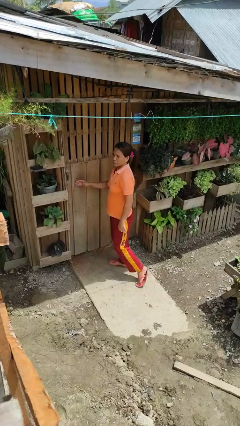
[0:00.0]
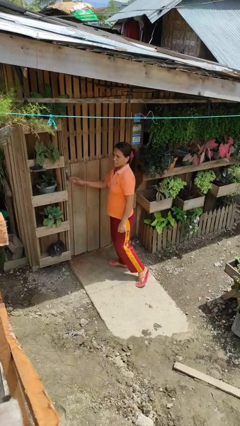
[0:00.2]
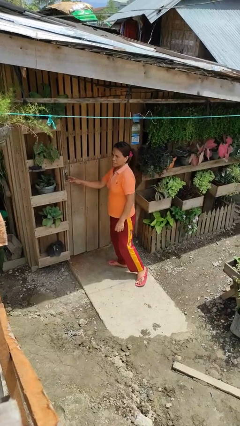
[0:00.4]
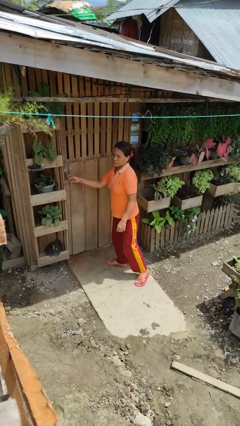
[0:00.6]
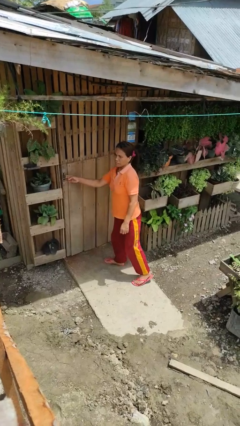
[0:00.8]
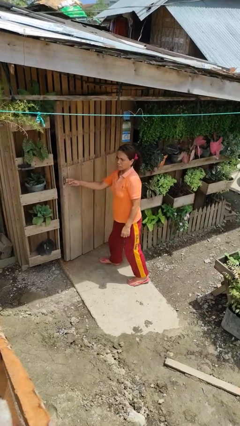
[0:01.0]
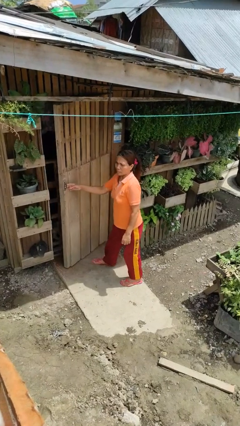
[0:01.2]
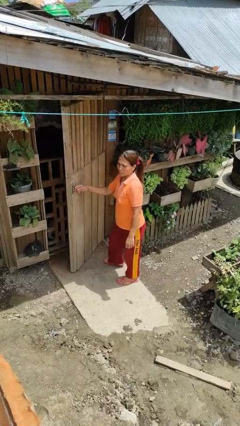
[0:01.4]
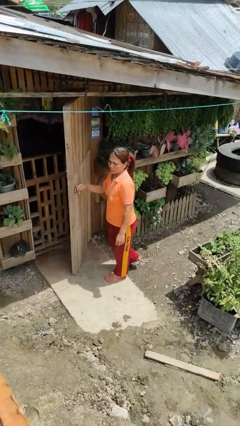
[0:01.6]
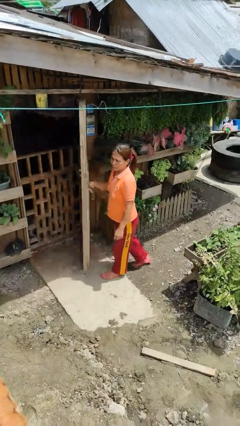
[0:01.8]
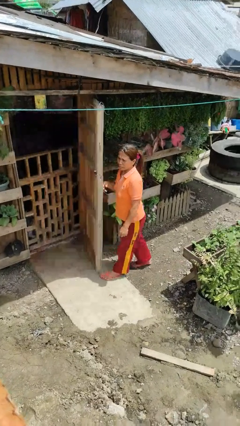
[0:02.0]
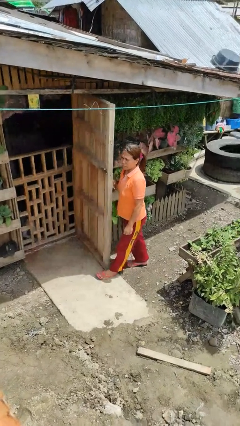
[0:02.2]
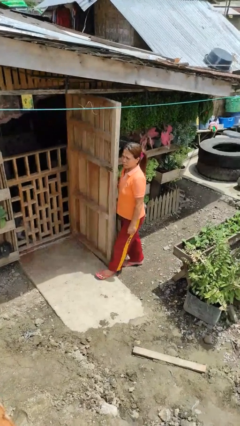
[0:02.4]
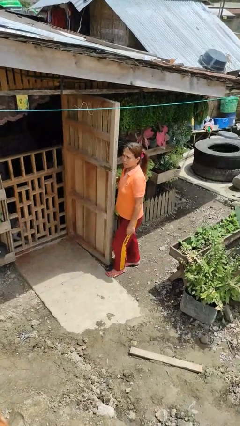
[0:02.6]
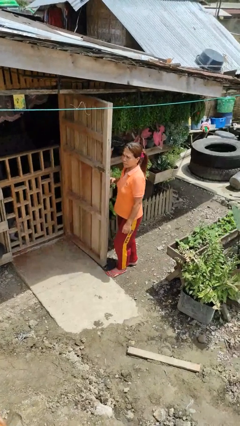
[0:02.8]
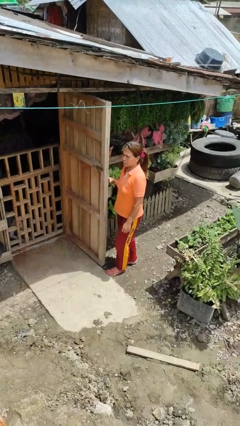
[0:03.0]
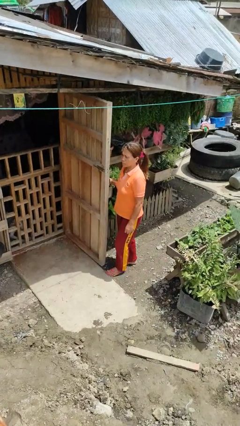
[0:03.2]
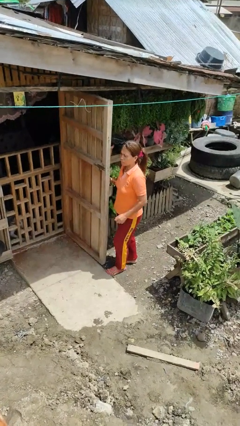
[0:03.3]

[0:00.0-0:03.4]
person opens facility door

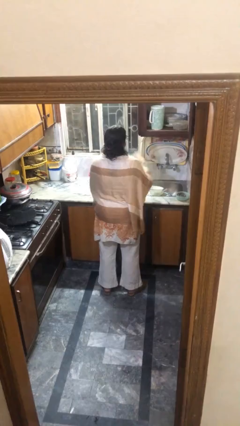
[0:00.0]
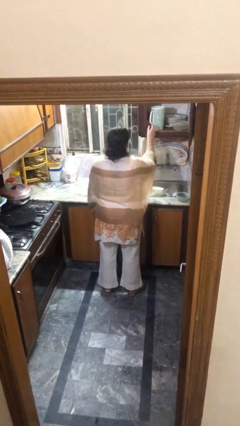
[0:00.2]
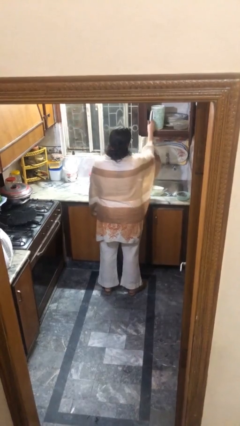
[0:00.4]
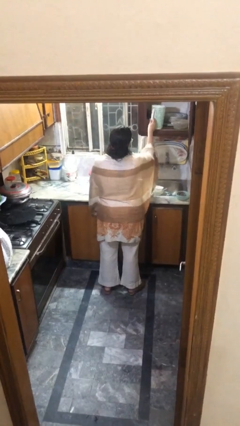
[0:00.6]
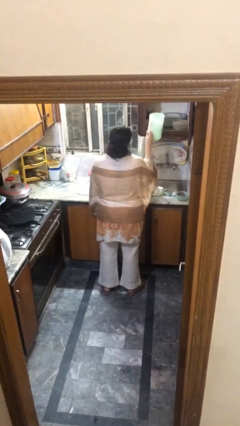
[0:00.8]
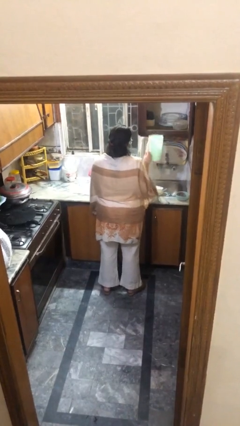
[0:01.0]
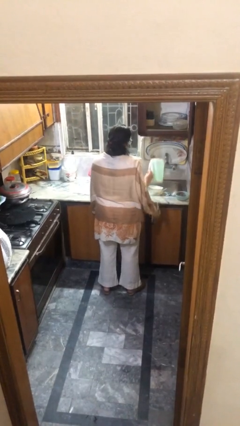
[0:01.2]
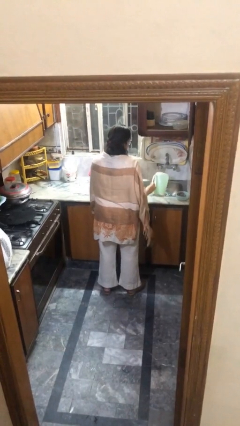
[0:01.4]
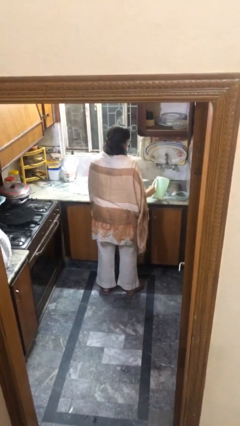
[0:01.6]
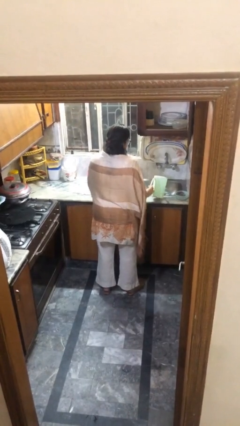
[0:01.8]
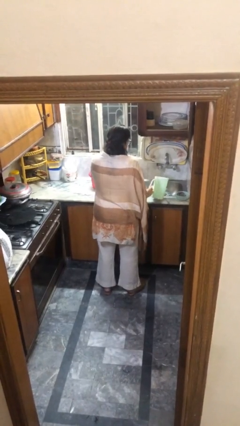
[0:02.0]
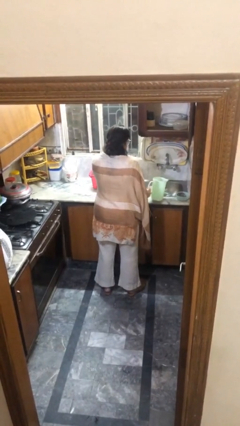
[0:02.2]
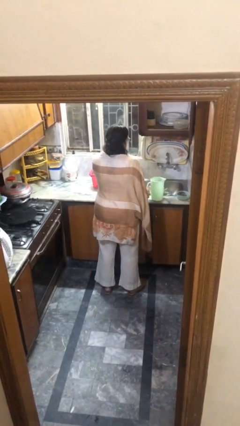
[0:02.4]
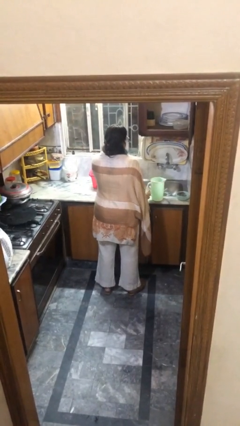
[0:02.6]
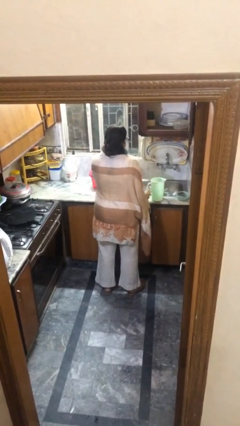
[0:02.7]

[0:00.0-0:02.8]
person takes object from kitchen drawer

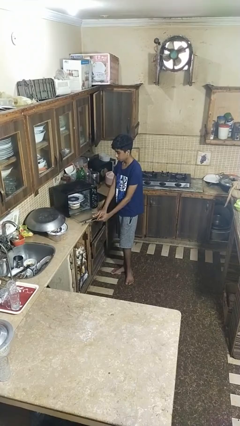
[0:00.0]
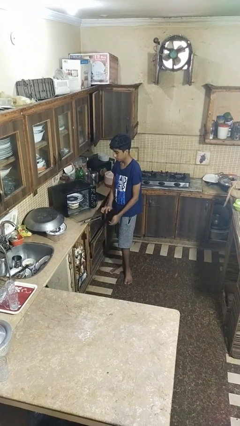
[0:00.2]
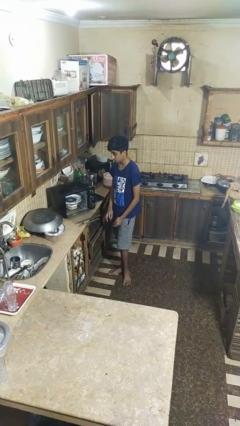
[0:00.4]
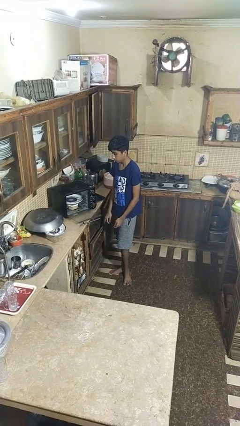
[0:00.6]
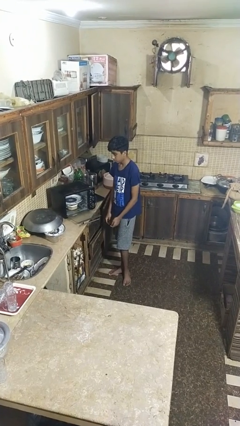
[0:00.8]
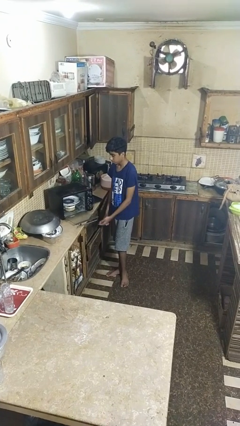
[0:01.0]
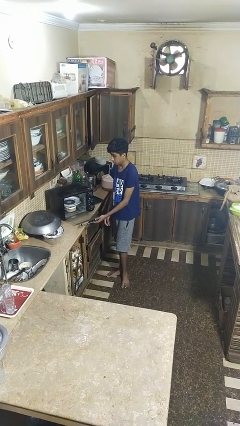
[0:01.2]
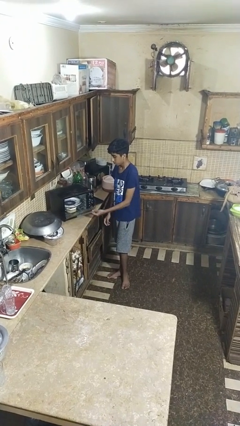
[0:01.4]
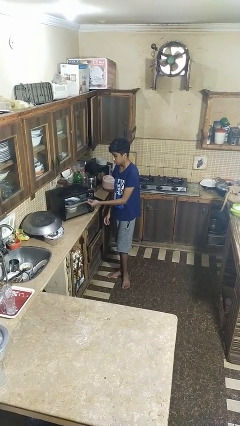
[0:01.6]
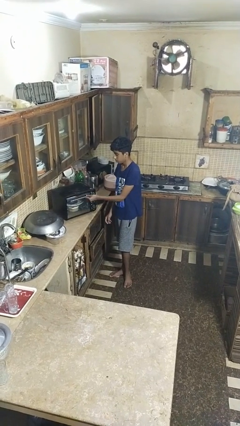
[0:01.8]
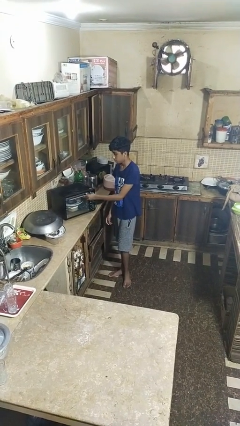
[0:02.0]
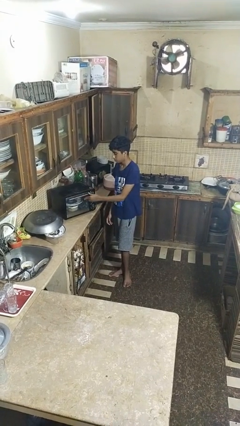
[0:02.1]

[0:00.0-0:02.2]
person closes dishwasher

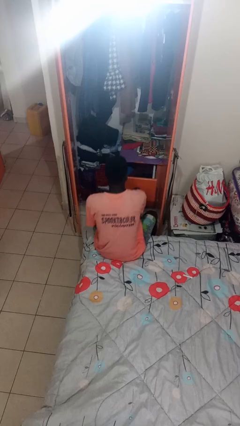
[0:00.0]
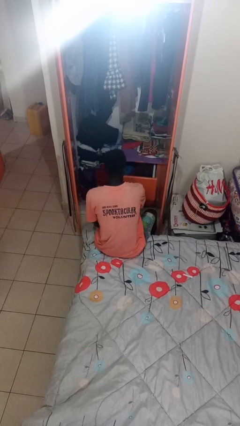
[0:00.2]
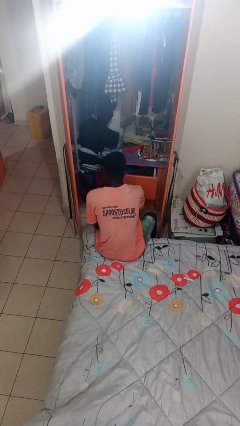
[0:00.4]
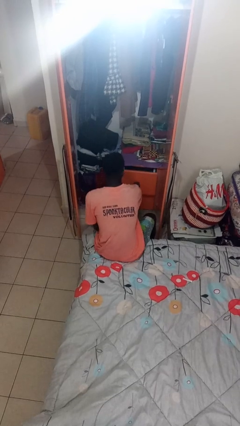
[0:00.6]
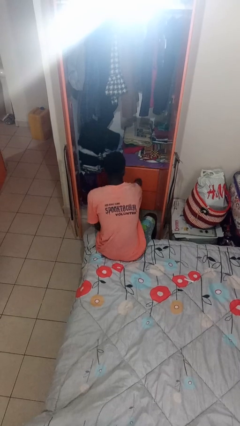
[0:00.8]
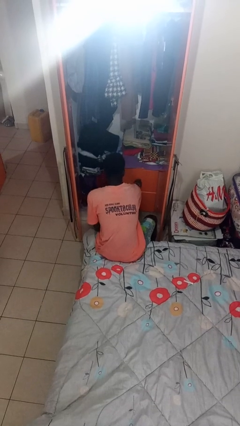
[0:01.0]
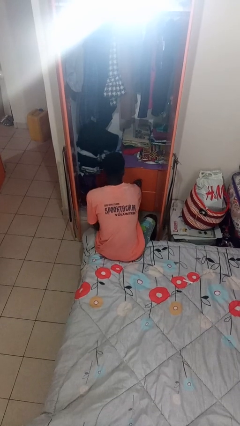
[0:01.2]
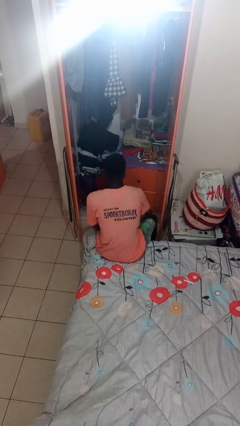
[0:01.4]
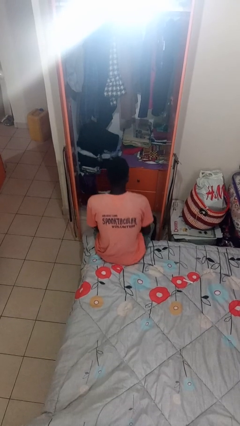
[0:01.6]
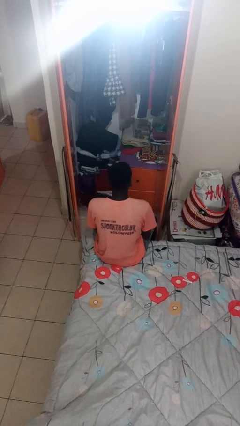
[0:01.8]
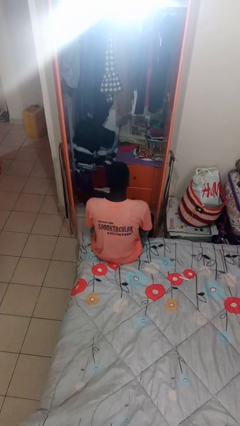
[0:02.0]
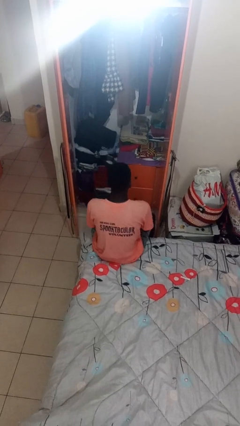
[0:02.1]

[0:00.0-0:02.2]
person closes dresser drawer

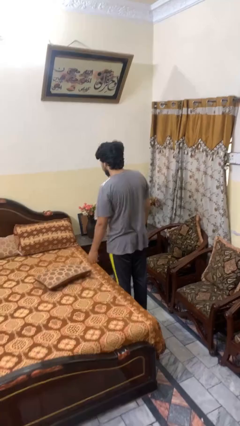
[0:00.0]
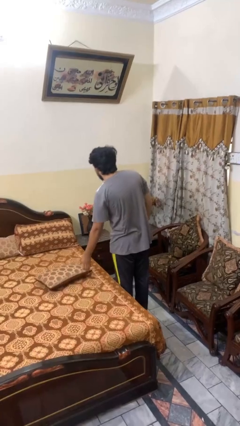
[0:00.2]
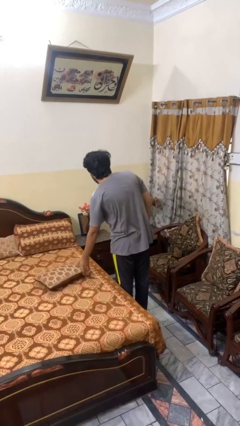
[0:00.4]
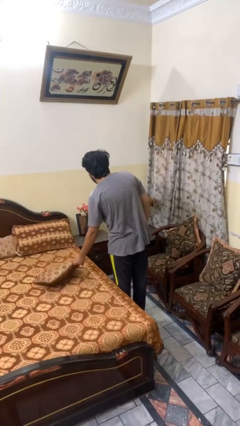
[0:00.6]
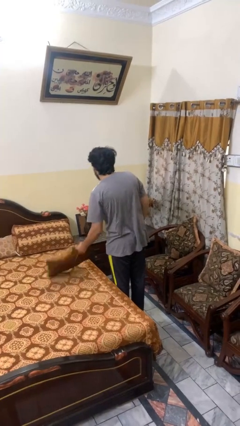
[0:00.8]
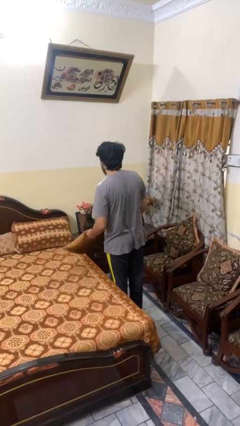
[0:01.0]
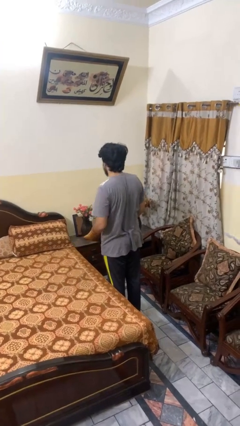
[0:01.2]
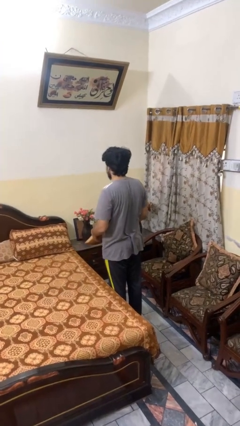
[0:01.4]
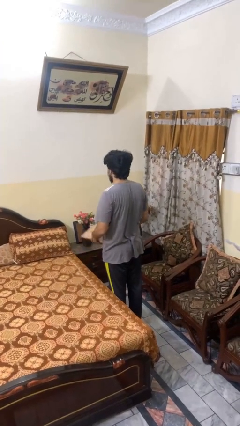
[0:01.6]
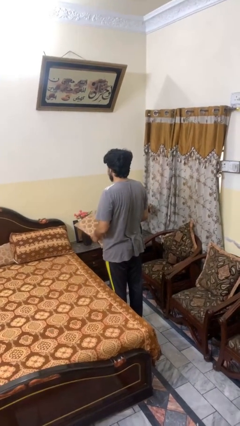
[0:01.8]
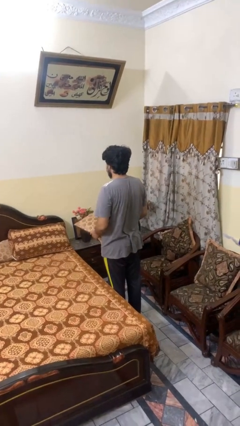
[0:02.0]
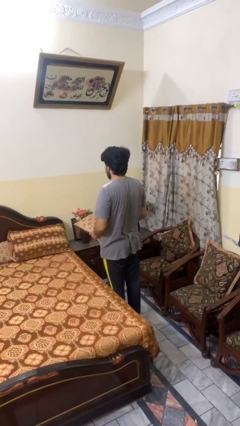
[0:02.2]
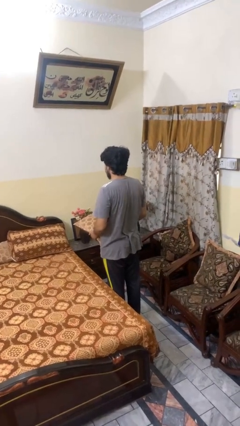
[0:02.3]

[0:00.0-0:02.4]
person picks up object from bed

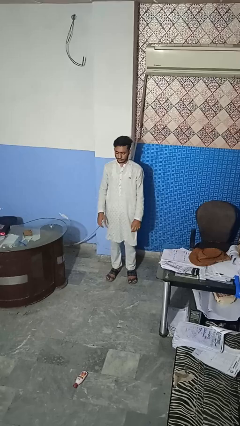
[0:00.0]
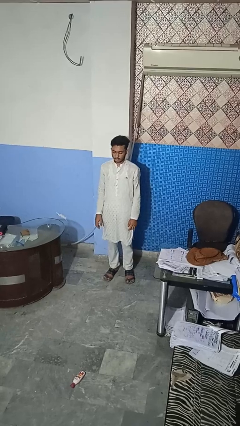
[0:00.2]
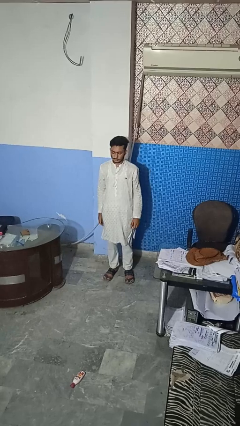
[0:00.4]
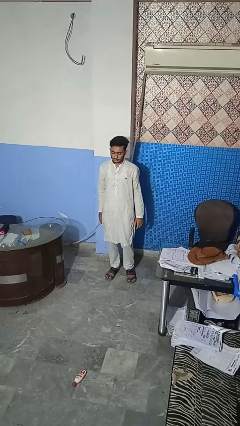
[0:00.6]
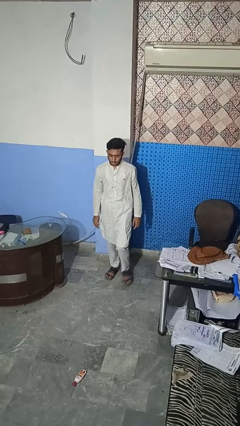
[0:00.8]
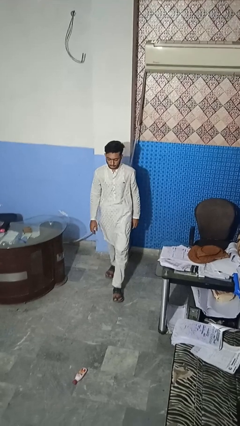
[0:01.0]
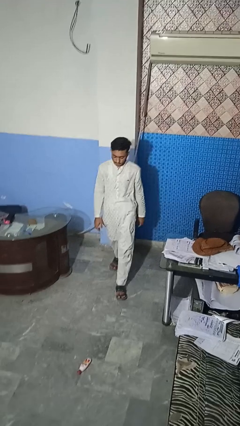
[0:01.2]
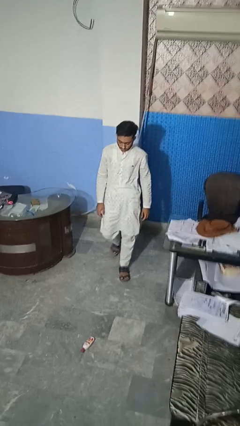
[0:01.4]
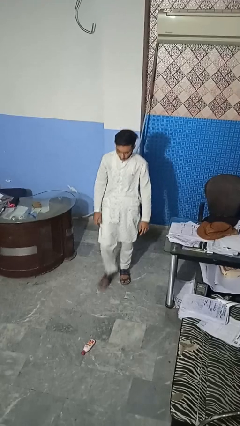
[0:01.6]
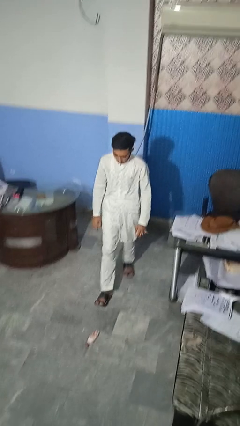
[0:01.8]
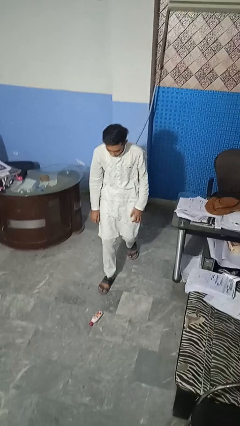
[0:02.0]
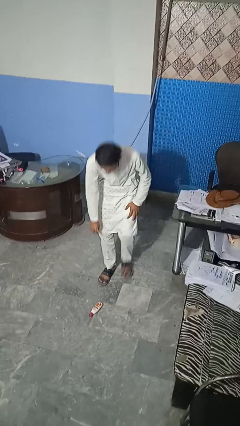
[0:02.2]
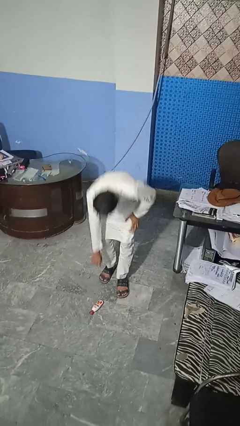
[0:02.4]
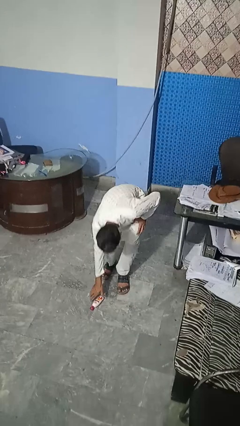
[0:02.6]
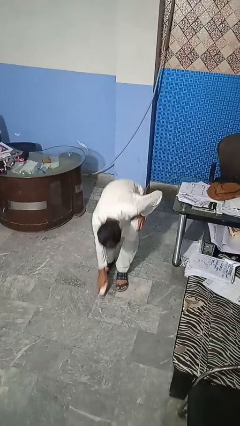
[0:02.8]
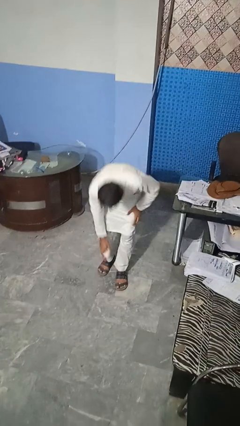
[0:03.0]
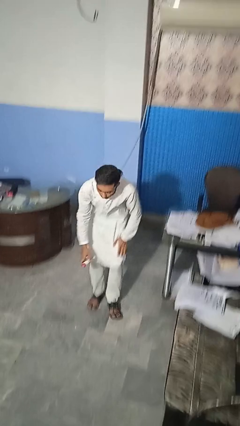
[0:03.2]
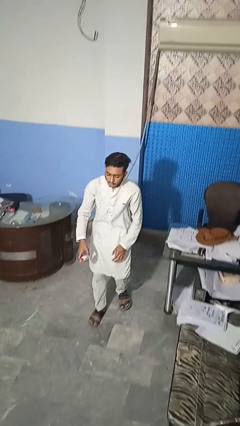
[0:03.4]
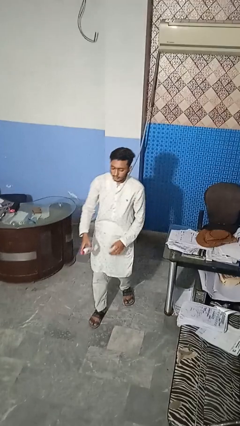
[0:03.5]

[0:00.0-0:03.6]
person picks up object from floor

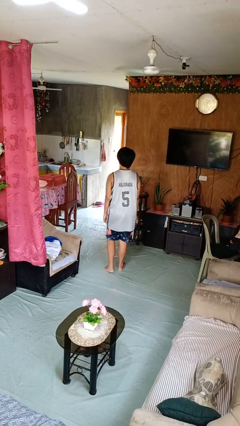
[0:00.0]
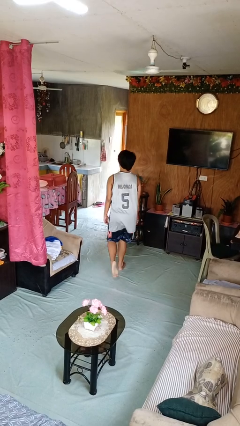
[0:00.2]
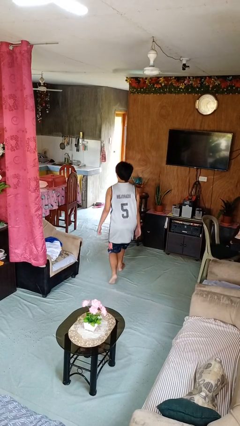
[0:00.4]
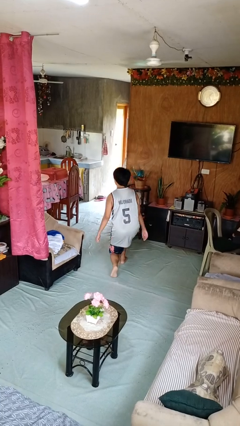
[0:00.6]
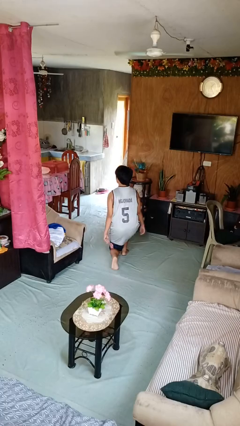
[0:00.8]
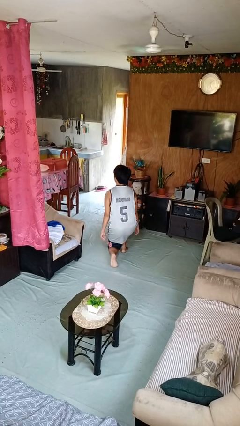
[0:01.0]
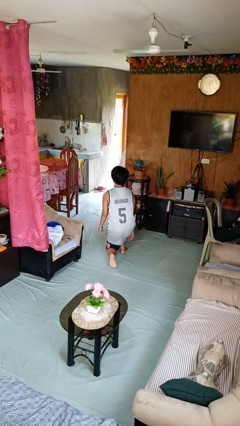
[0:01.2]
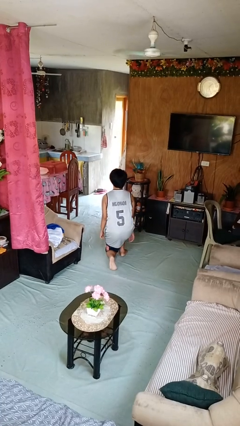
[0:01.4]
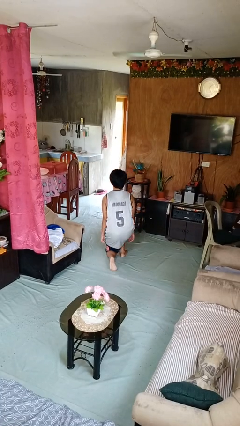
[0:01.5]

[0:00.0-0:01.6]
person kneels
